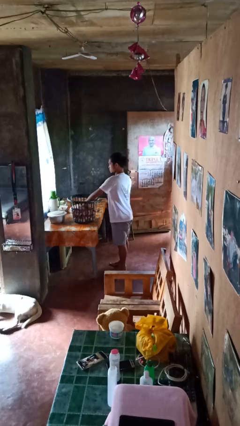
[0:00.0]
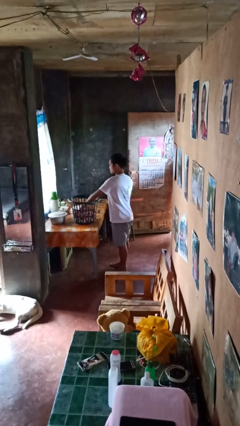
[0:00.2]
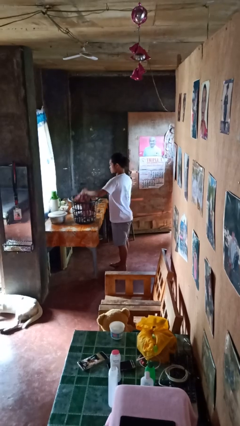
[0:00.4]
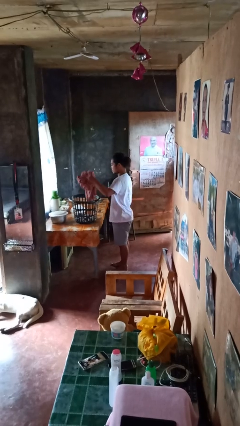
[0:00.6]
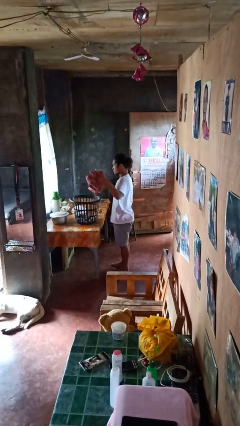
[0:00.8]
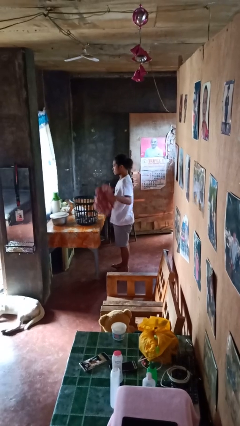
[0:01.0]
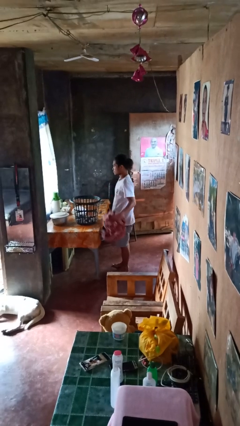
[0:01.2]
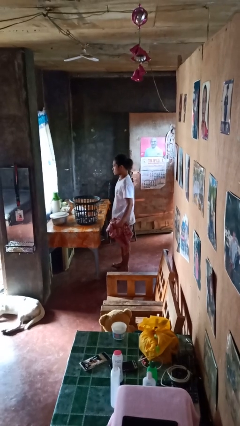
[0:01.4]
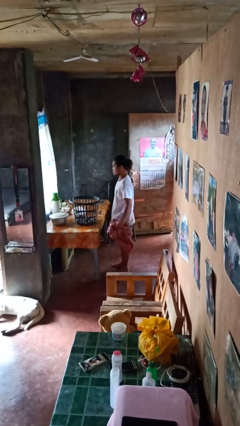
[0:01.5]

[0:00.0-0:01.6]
person takes object from basket

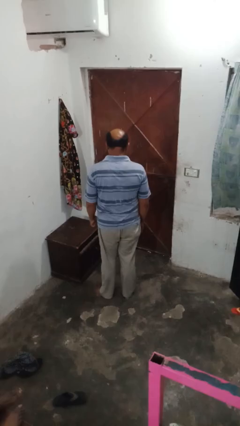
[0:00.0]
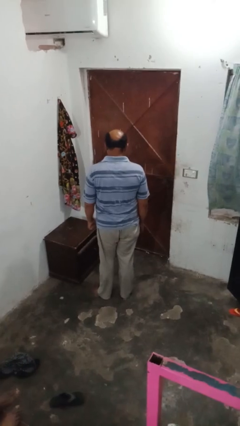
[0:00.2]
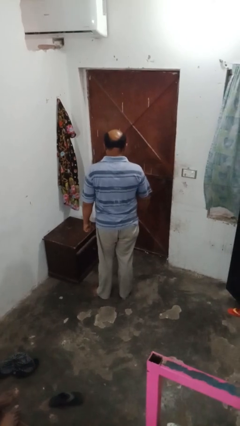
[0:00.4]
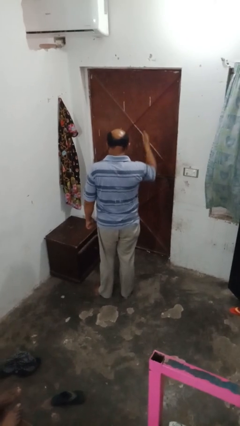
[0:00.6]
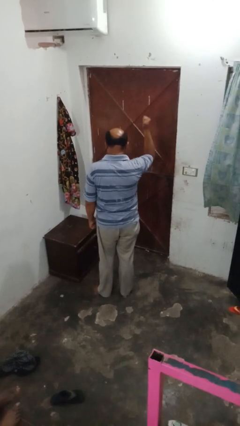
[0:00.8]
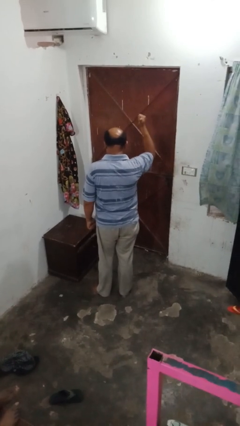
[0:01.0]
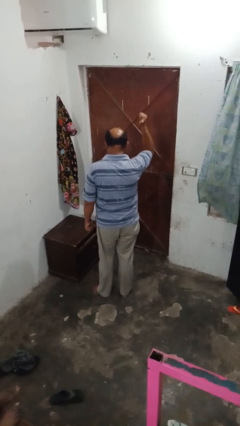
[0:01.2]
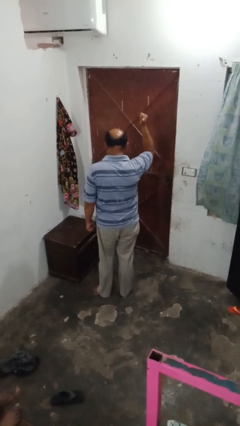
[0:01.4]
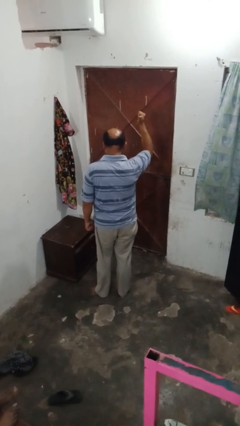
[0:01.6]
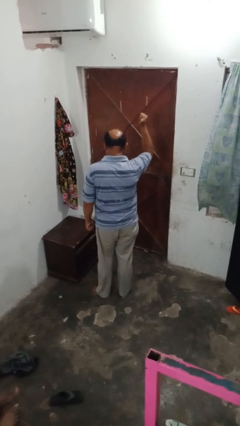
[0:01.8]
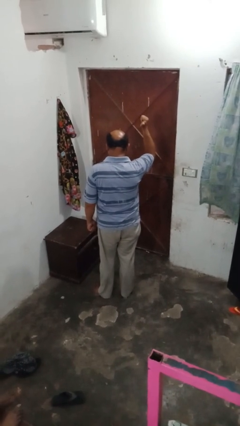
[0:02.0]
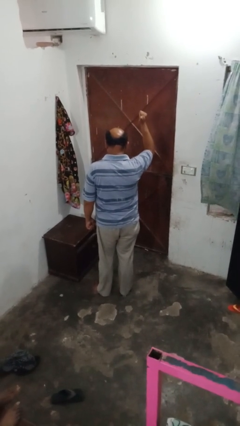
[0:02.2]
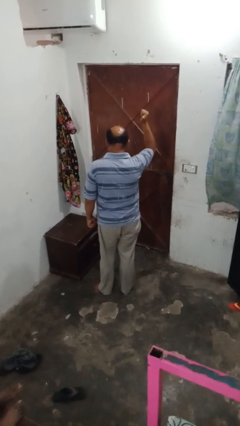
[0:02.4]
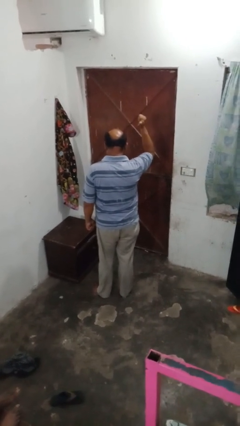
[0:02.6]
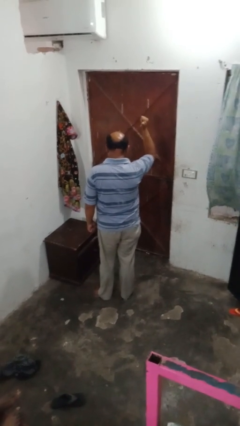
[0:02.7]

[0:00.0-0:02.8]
person gestures behind me

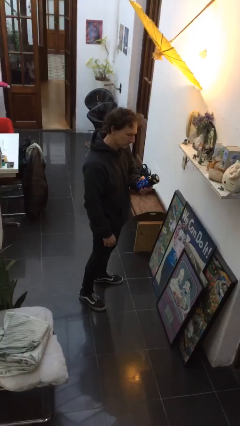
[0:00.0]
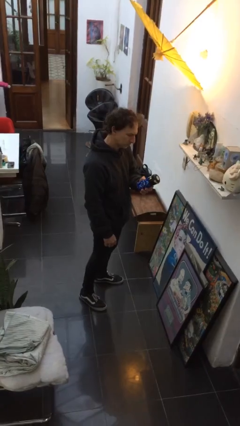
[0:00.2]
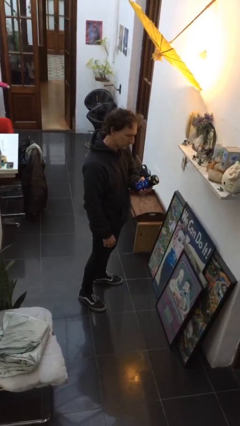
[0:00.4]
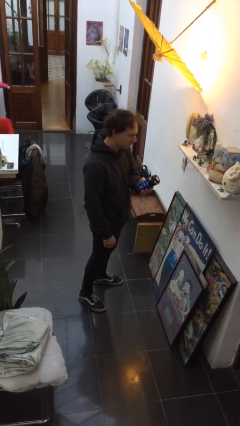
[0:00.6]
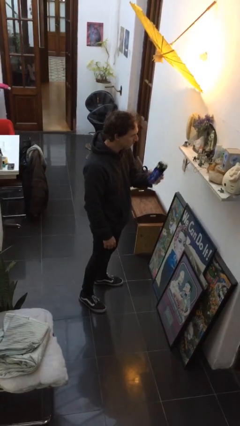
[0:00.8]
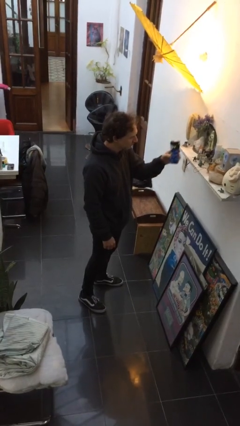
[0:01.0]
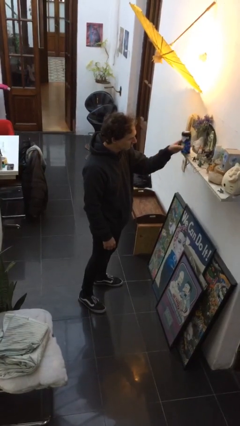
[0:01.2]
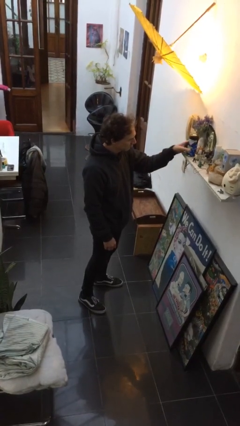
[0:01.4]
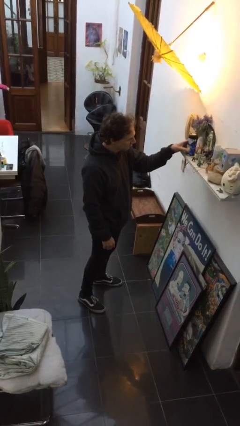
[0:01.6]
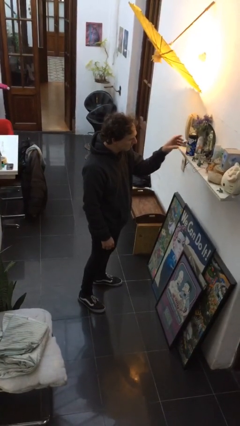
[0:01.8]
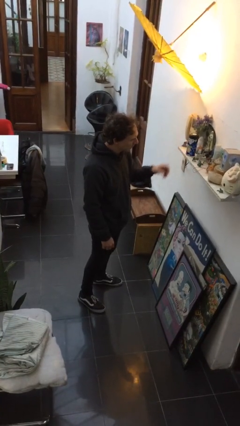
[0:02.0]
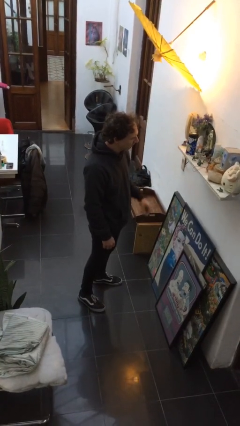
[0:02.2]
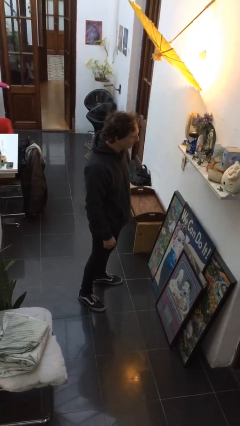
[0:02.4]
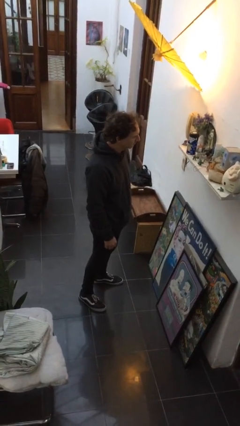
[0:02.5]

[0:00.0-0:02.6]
person puts down object on shelf

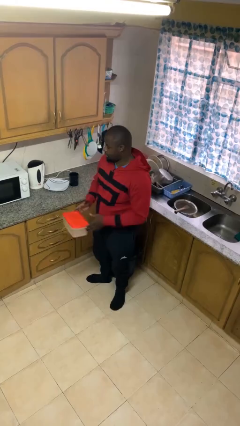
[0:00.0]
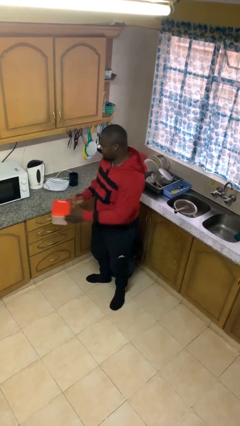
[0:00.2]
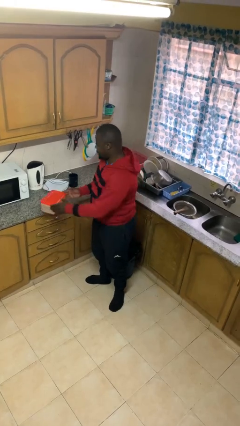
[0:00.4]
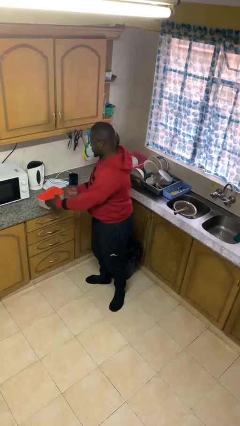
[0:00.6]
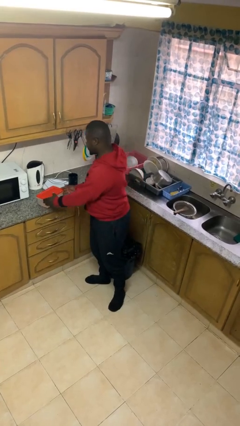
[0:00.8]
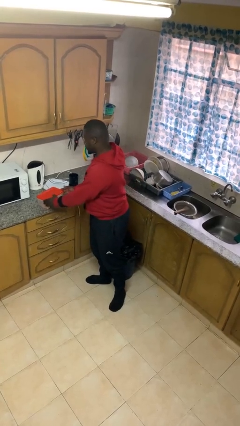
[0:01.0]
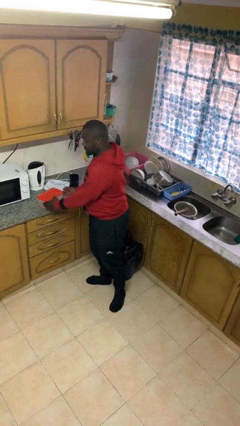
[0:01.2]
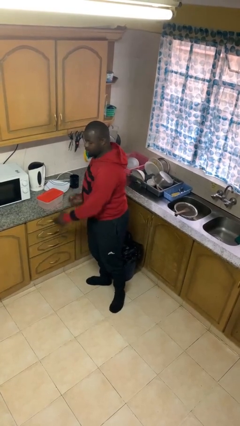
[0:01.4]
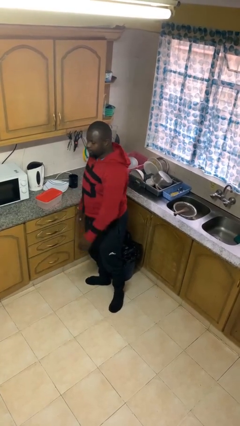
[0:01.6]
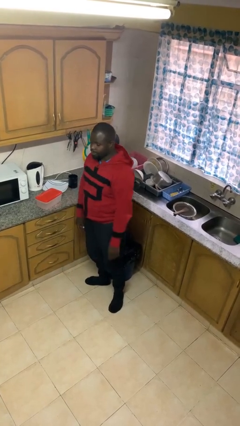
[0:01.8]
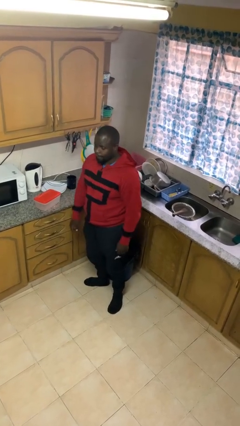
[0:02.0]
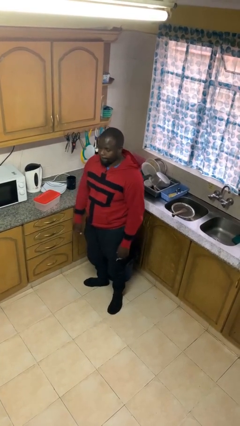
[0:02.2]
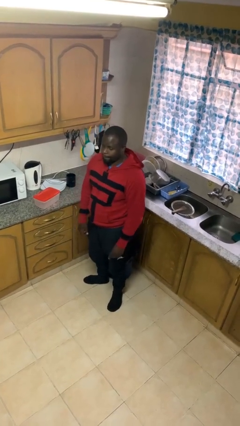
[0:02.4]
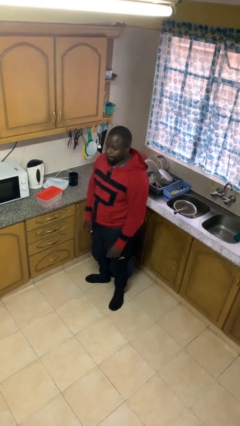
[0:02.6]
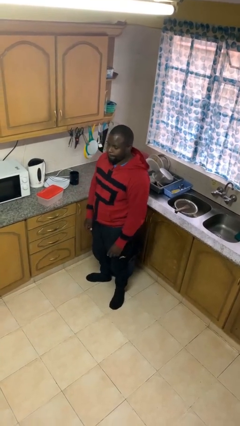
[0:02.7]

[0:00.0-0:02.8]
person puts down object on countertop

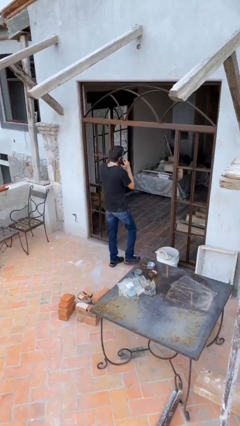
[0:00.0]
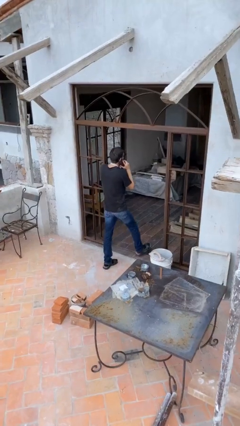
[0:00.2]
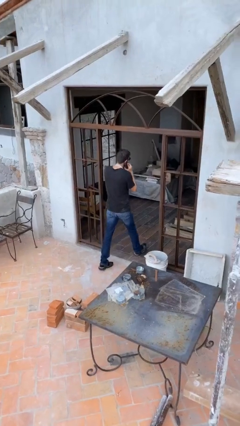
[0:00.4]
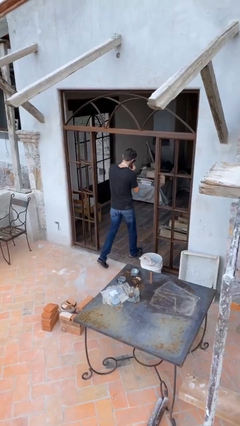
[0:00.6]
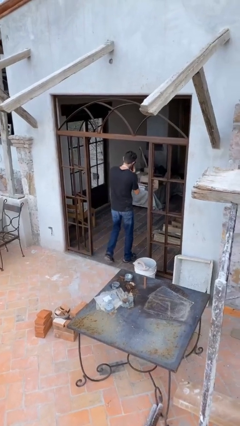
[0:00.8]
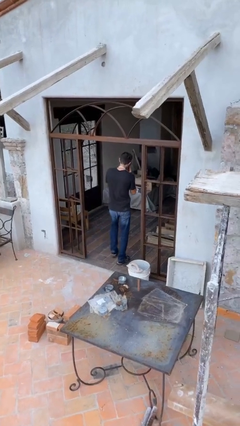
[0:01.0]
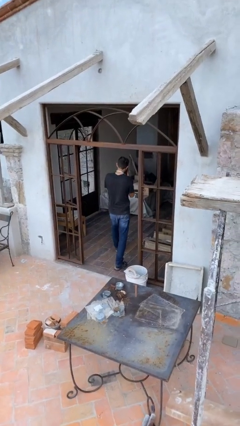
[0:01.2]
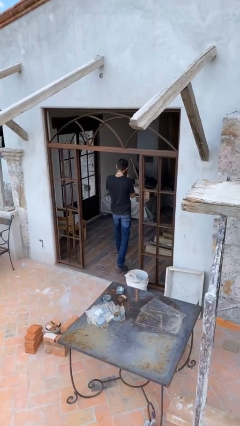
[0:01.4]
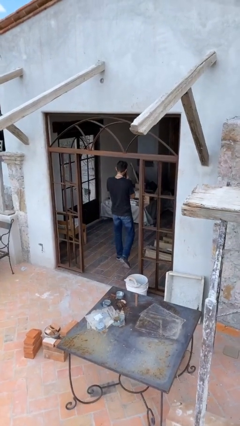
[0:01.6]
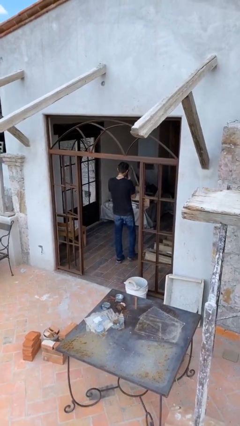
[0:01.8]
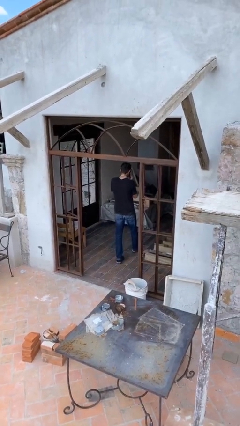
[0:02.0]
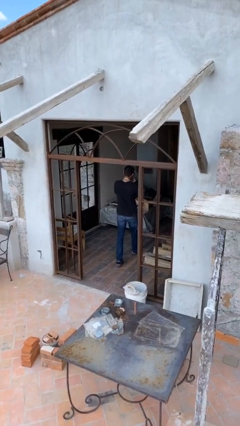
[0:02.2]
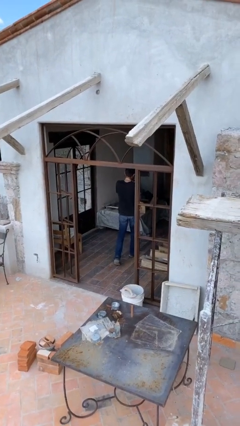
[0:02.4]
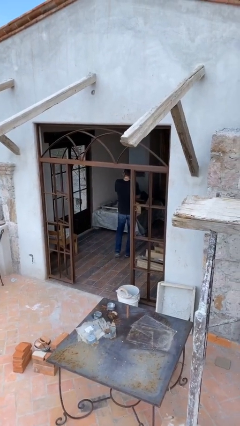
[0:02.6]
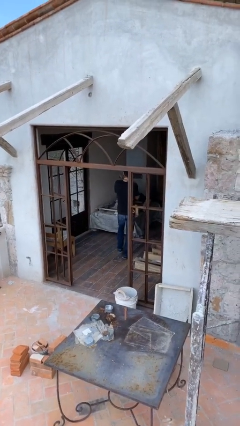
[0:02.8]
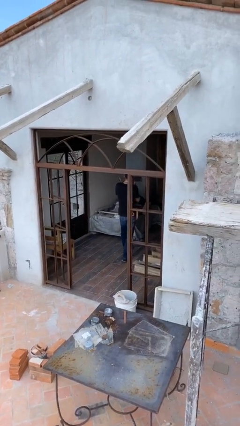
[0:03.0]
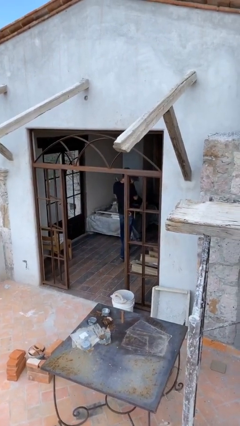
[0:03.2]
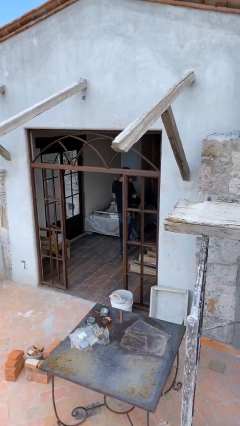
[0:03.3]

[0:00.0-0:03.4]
person exits scene through structure

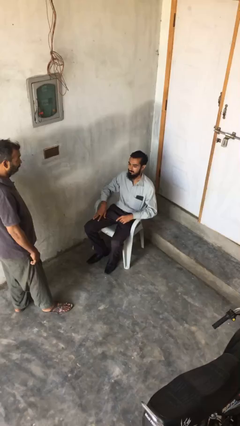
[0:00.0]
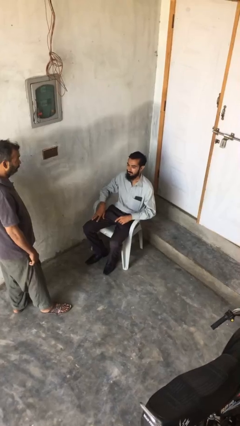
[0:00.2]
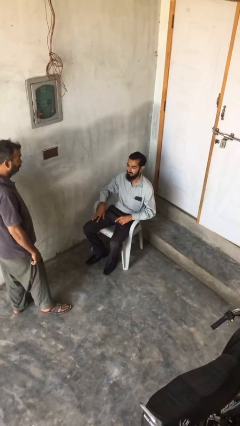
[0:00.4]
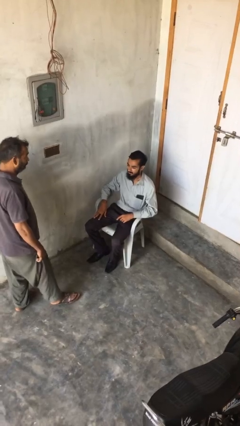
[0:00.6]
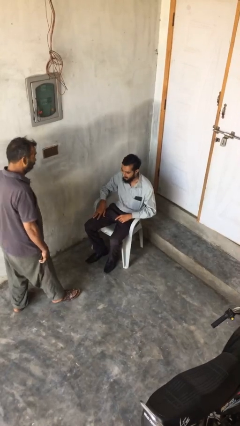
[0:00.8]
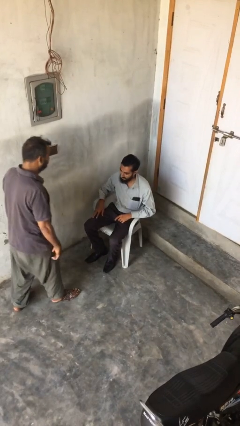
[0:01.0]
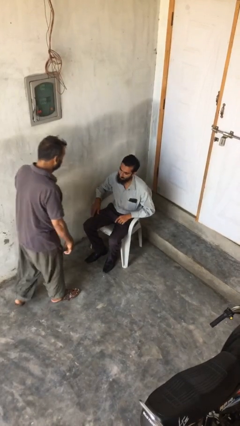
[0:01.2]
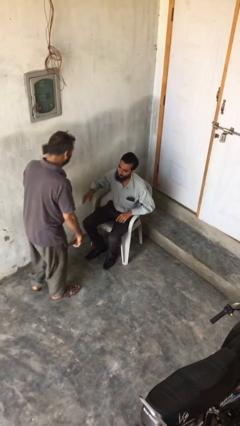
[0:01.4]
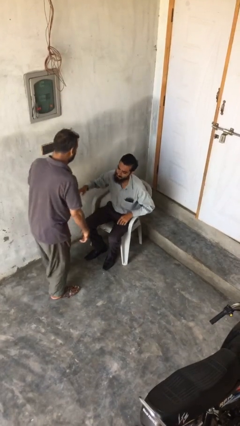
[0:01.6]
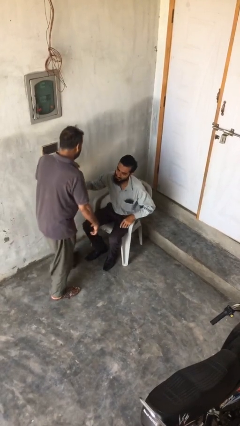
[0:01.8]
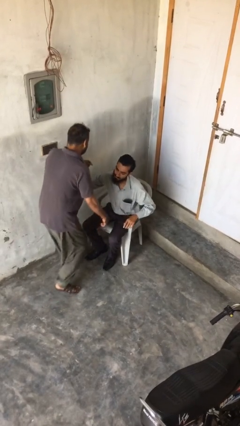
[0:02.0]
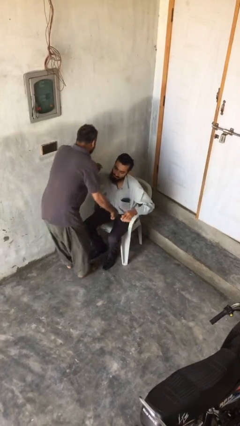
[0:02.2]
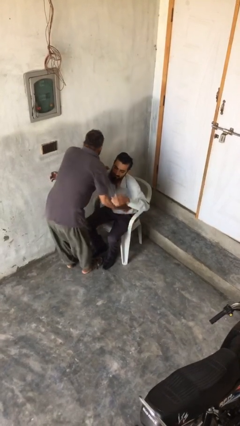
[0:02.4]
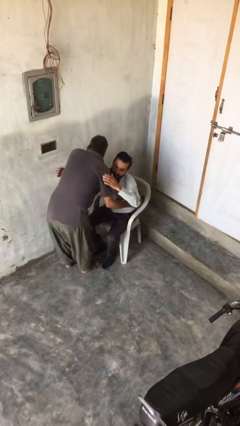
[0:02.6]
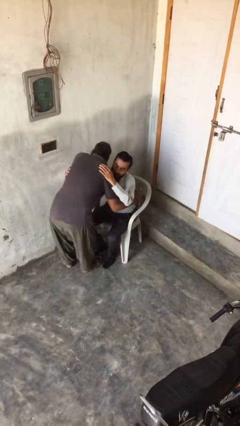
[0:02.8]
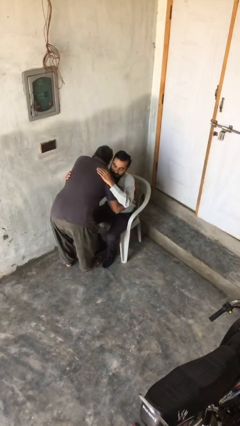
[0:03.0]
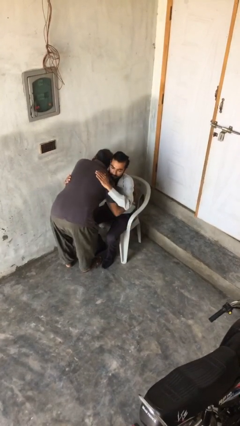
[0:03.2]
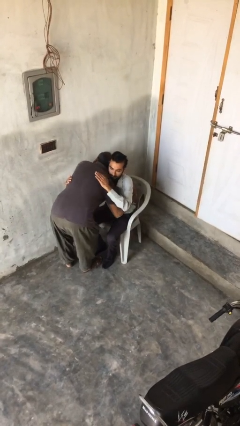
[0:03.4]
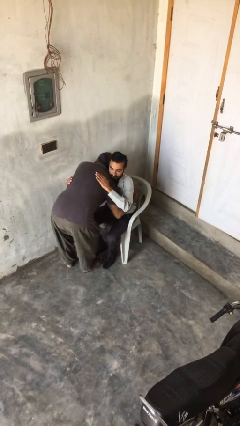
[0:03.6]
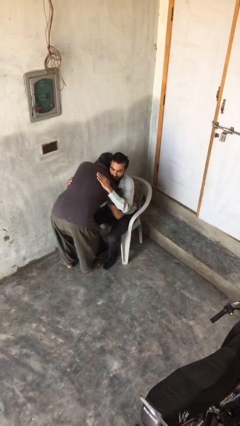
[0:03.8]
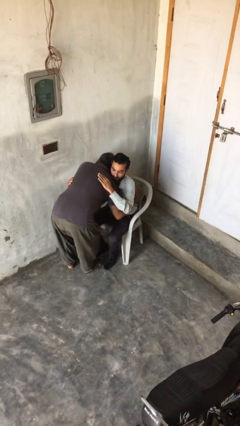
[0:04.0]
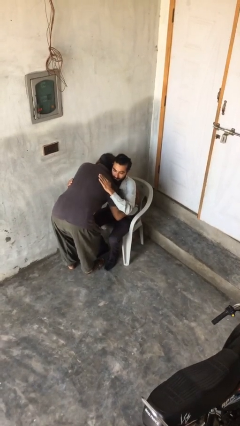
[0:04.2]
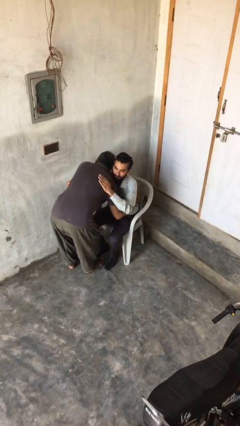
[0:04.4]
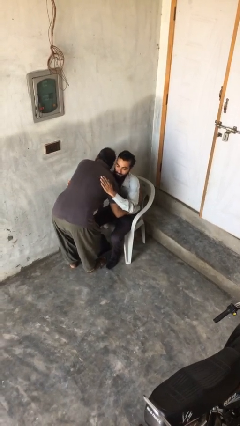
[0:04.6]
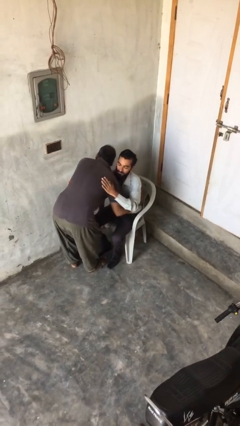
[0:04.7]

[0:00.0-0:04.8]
person embraces person
